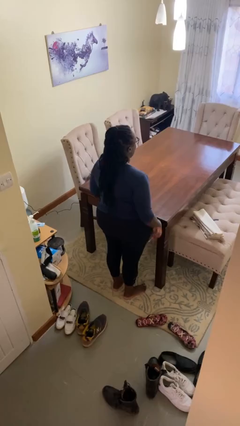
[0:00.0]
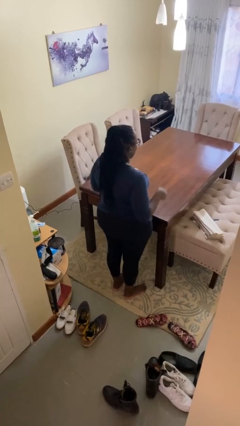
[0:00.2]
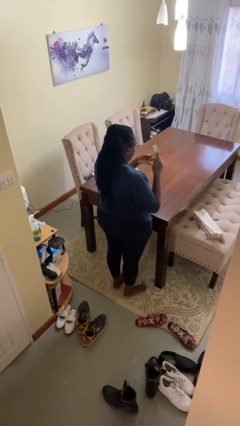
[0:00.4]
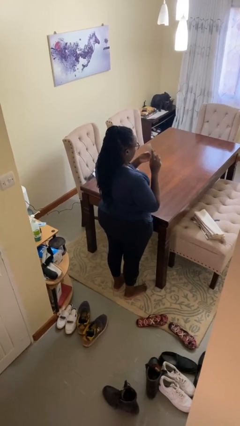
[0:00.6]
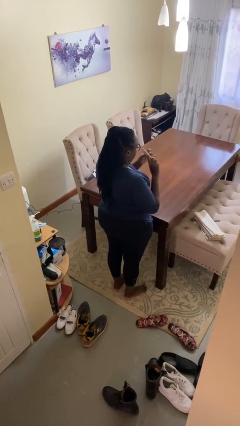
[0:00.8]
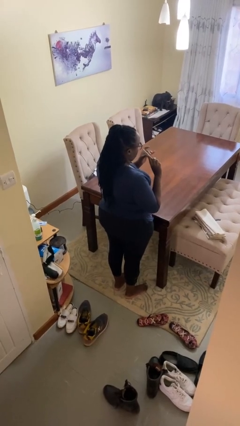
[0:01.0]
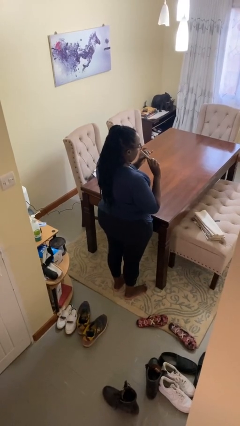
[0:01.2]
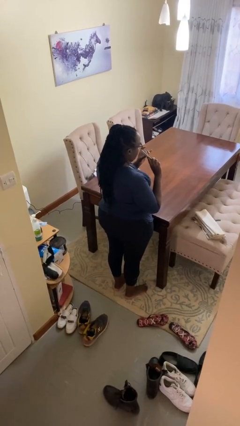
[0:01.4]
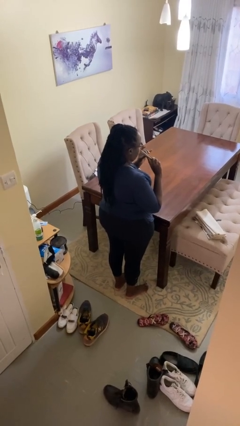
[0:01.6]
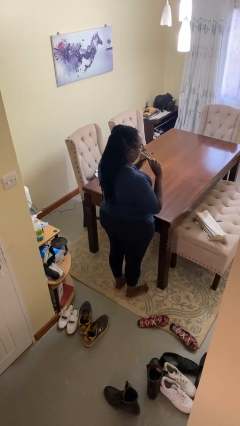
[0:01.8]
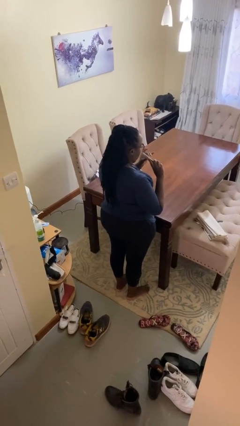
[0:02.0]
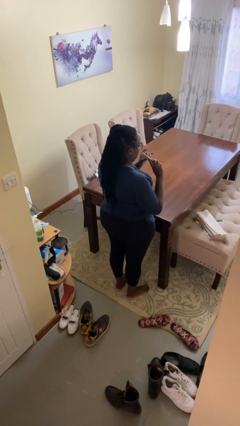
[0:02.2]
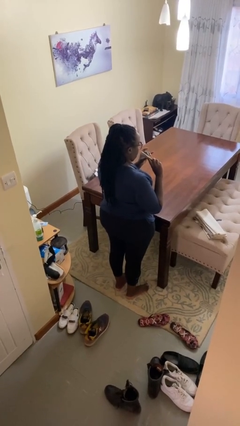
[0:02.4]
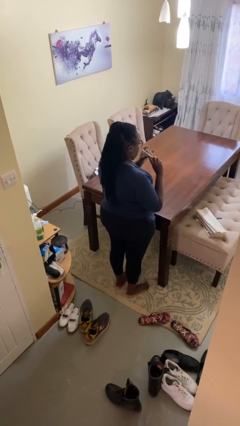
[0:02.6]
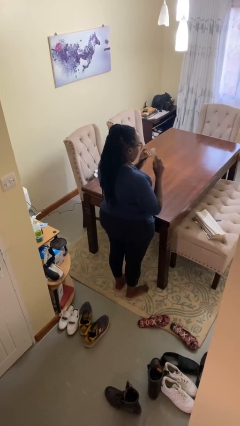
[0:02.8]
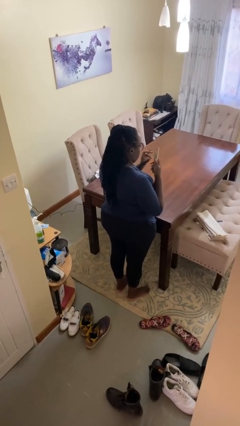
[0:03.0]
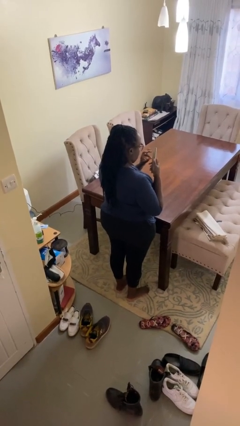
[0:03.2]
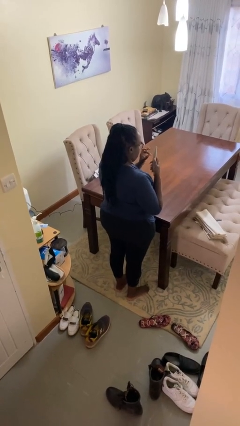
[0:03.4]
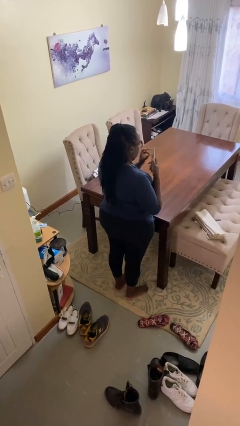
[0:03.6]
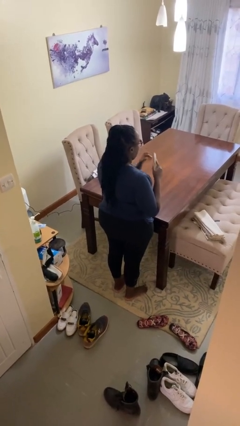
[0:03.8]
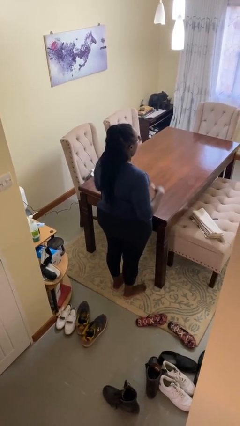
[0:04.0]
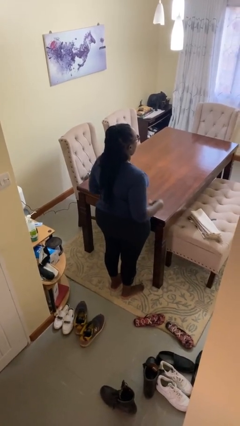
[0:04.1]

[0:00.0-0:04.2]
person files fingernails

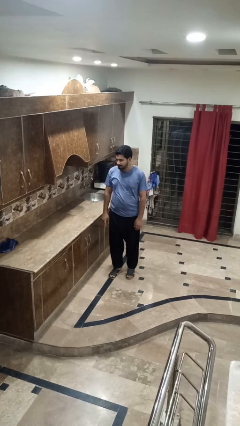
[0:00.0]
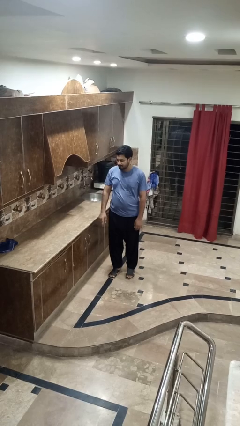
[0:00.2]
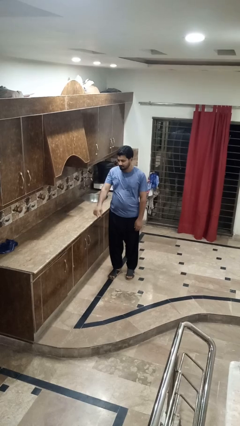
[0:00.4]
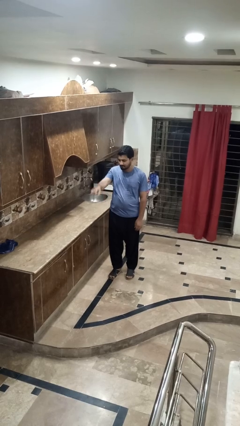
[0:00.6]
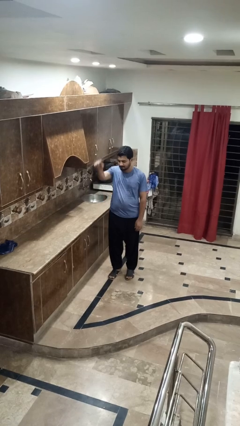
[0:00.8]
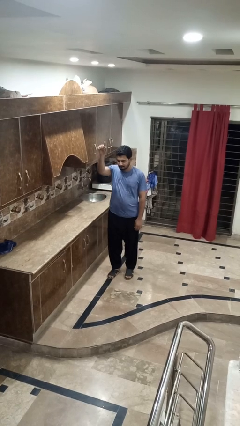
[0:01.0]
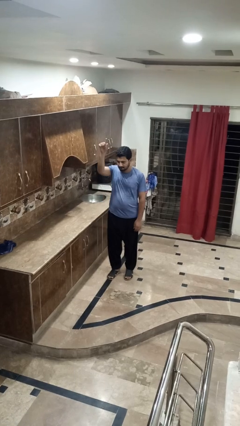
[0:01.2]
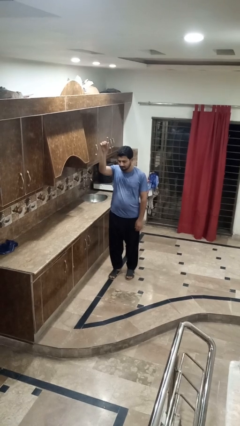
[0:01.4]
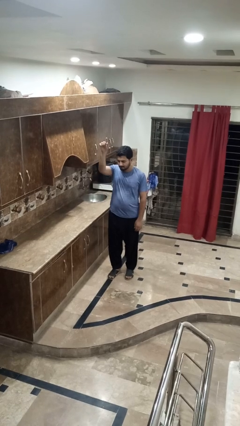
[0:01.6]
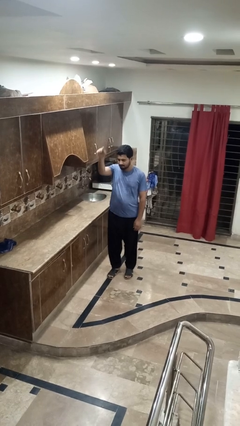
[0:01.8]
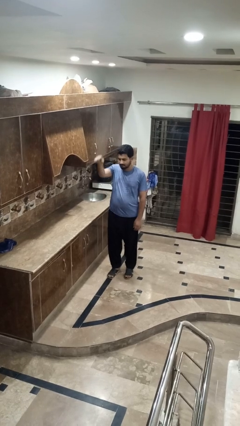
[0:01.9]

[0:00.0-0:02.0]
person gestures swipe up

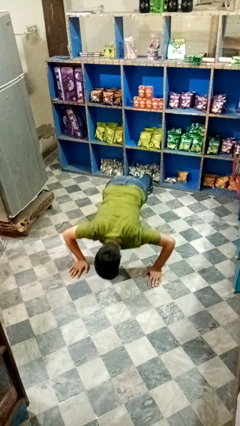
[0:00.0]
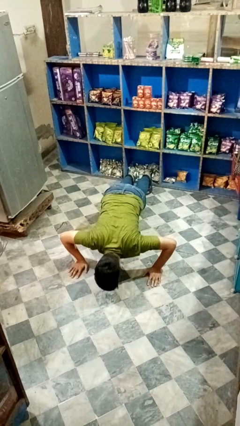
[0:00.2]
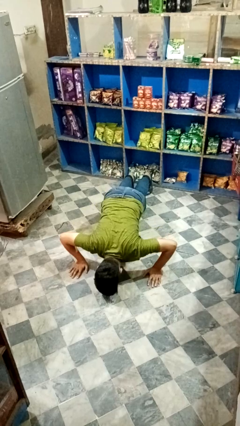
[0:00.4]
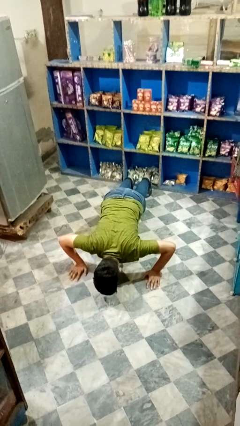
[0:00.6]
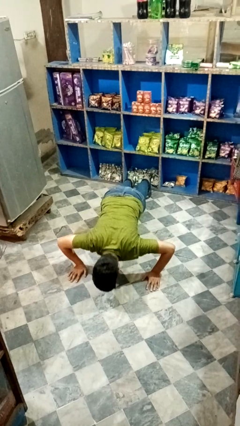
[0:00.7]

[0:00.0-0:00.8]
person exercises with pushup

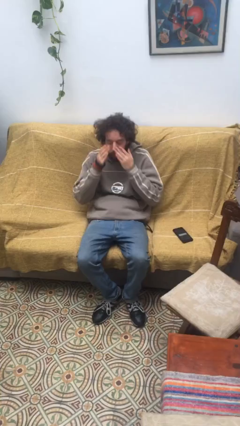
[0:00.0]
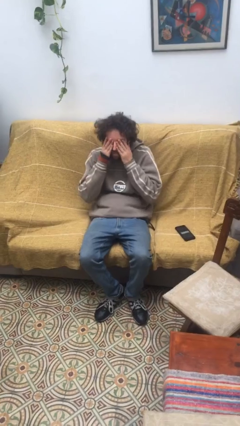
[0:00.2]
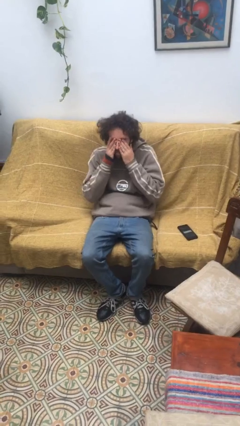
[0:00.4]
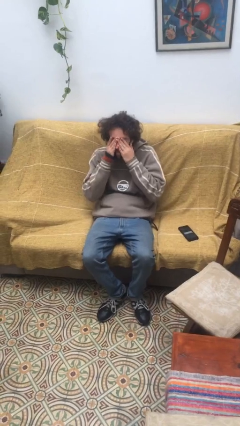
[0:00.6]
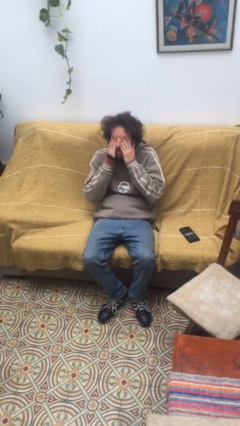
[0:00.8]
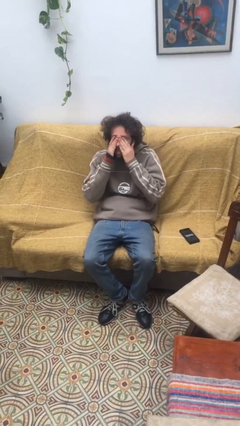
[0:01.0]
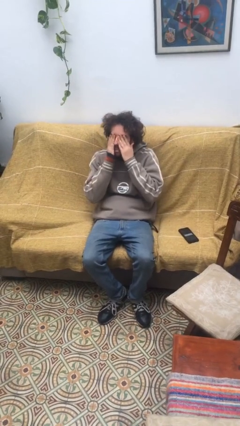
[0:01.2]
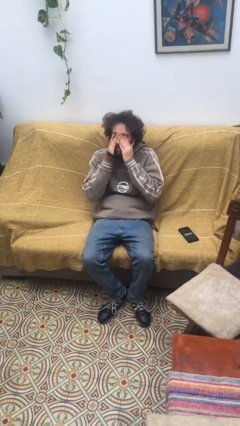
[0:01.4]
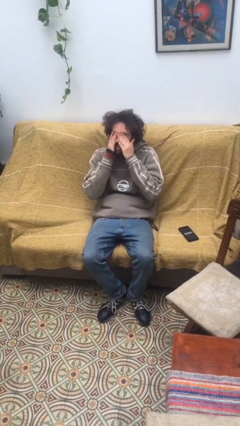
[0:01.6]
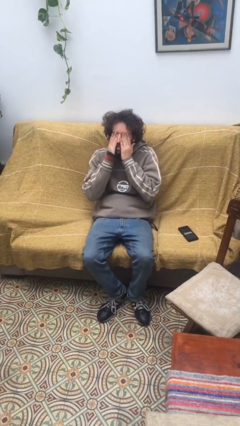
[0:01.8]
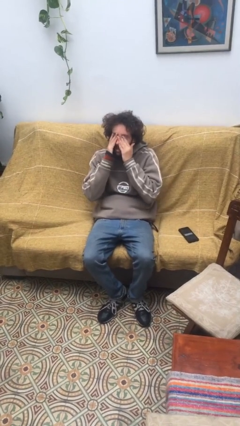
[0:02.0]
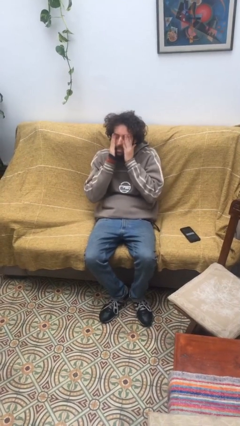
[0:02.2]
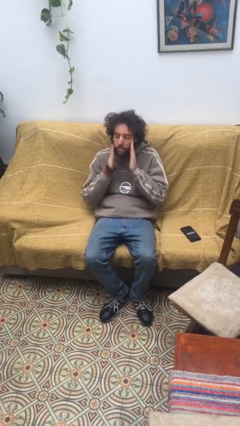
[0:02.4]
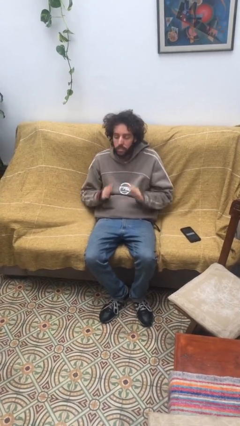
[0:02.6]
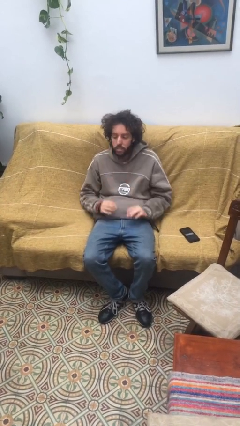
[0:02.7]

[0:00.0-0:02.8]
person rubs eyes

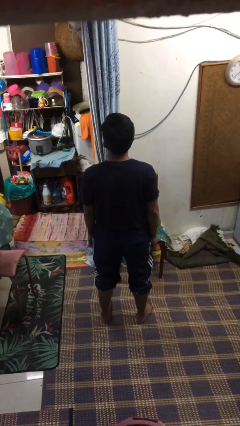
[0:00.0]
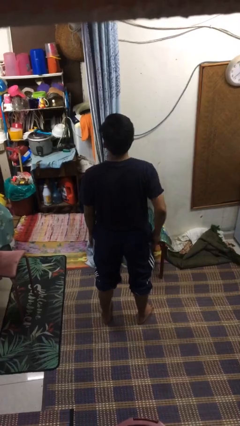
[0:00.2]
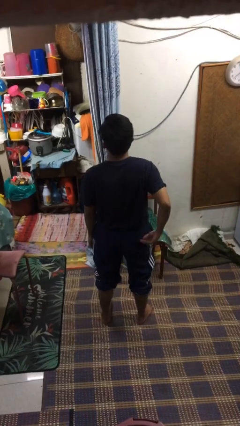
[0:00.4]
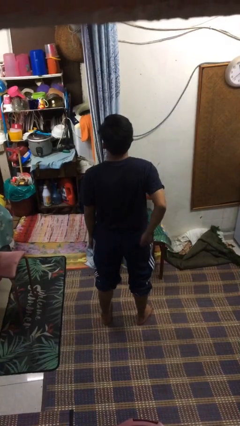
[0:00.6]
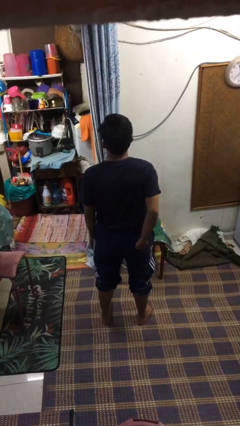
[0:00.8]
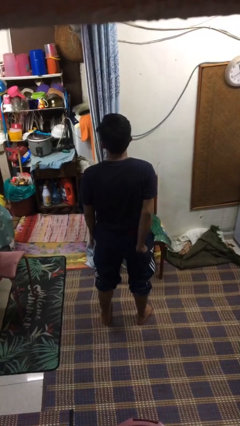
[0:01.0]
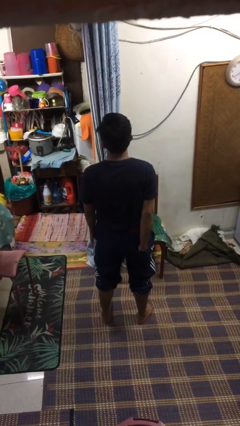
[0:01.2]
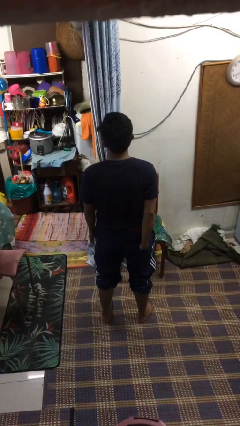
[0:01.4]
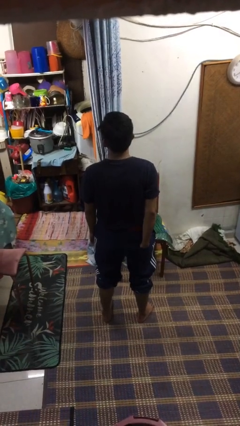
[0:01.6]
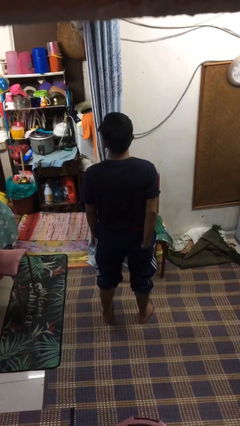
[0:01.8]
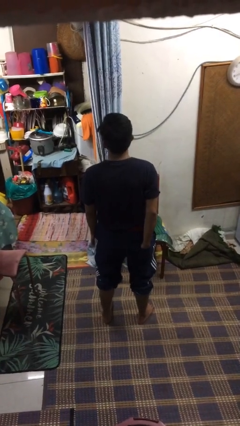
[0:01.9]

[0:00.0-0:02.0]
person puts hands in back pockets

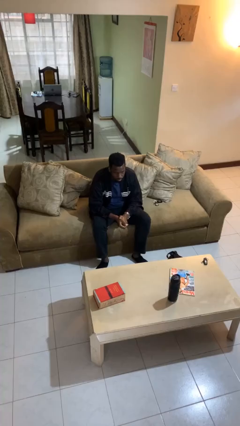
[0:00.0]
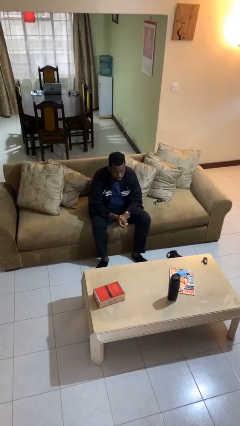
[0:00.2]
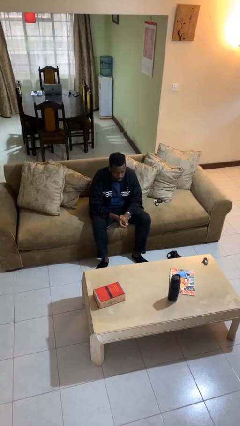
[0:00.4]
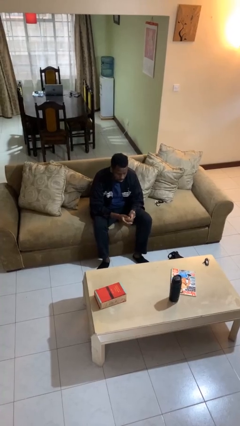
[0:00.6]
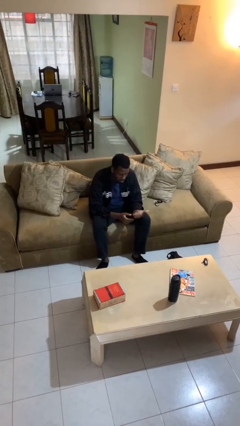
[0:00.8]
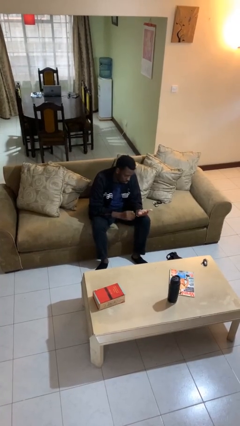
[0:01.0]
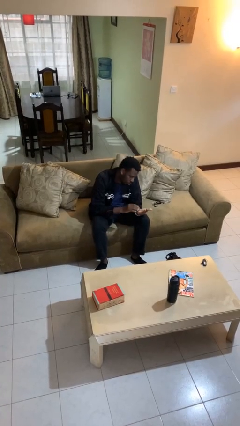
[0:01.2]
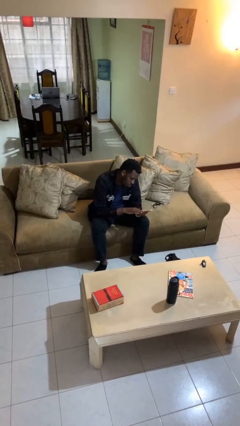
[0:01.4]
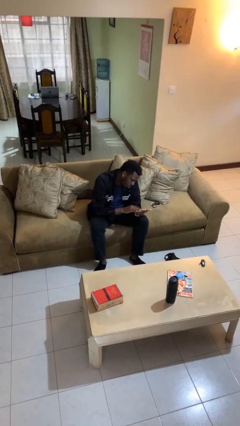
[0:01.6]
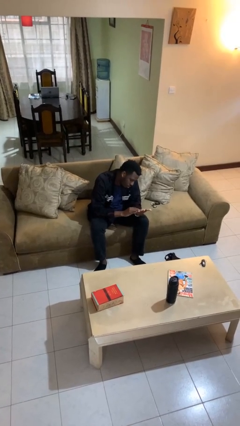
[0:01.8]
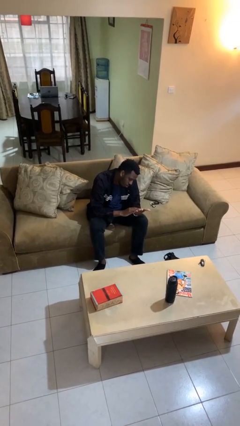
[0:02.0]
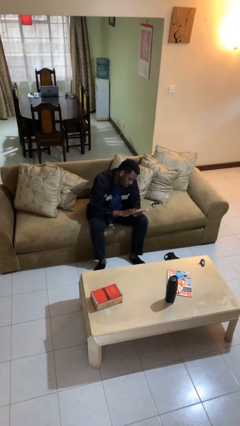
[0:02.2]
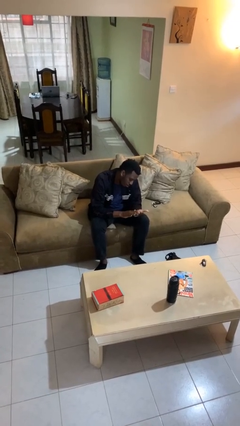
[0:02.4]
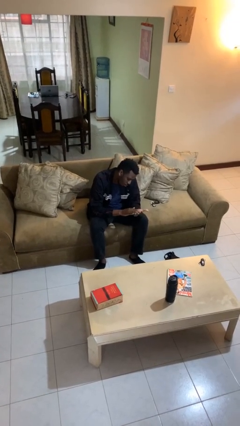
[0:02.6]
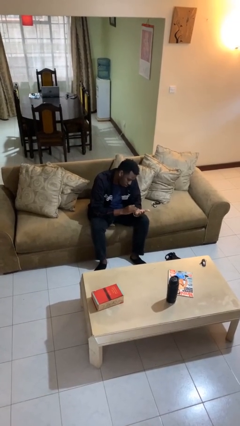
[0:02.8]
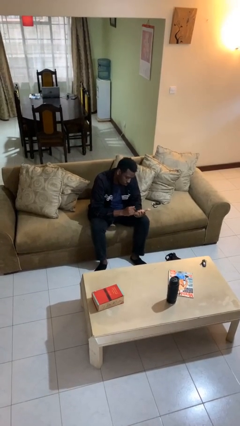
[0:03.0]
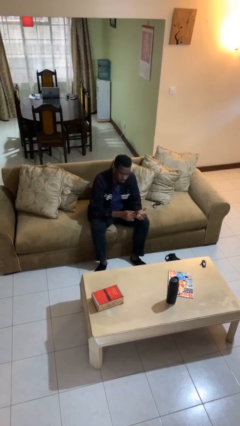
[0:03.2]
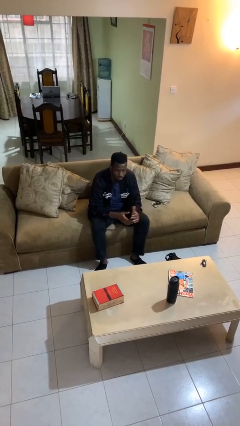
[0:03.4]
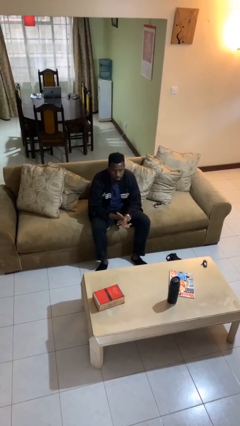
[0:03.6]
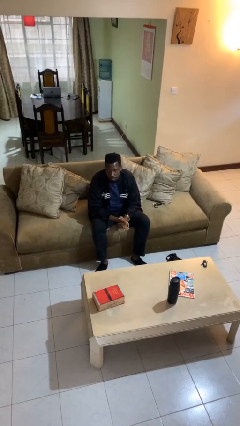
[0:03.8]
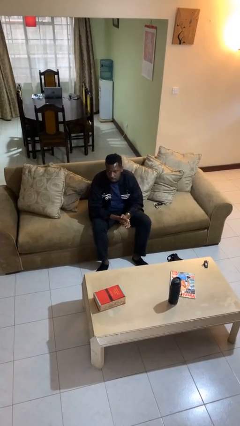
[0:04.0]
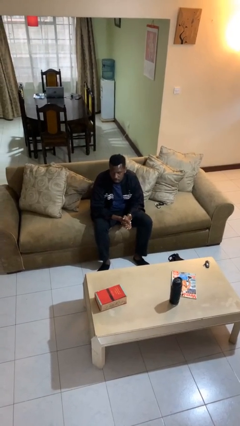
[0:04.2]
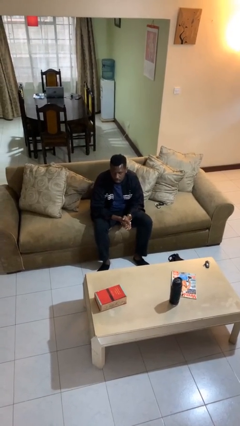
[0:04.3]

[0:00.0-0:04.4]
person looks at hands in lap

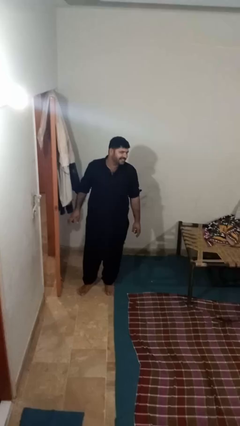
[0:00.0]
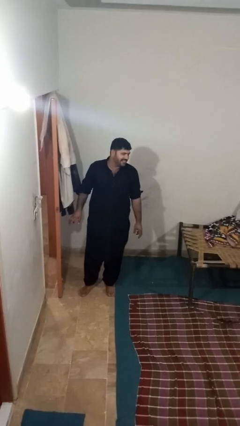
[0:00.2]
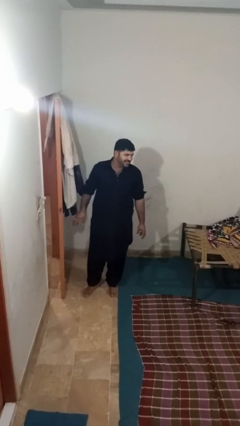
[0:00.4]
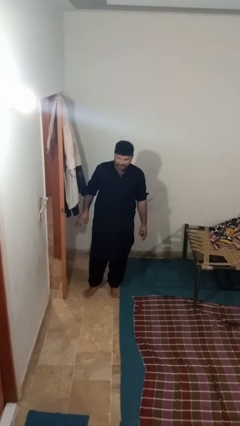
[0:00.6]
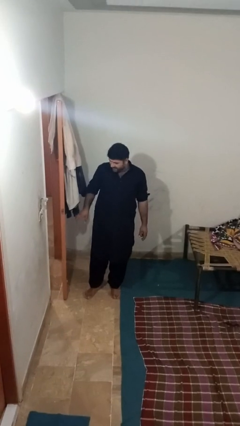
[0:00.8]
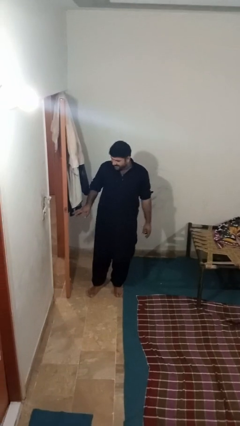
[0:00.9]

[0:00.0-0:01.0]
person opens facility door
